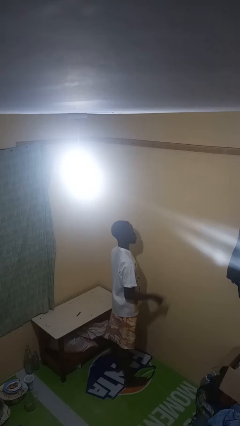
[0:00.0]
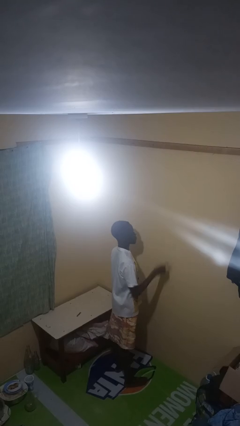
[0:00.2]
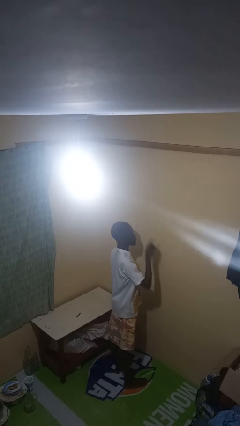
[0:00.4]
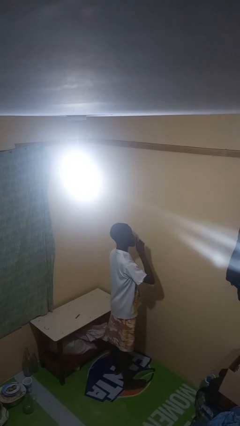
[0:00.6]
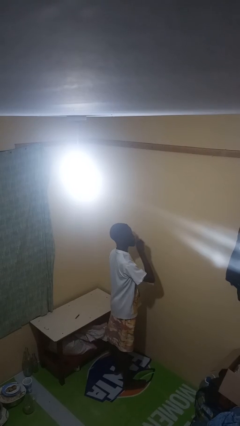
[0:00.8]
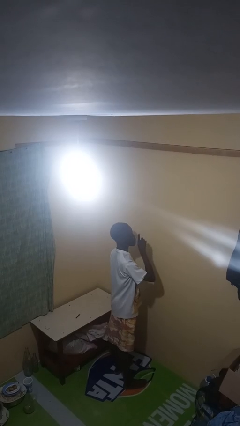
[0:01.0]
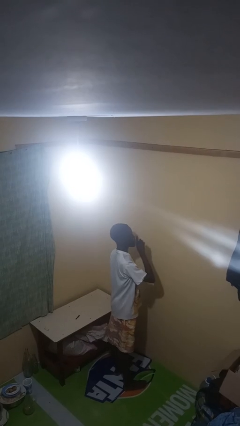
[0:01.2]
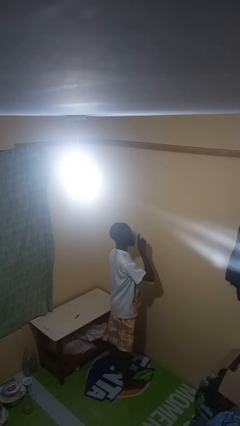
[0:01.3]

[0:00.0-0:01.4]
person gestures be quiet

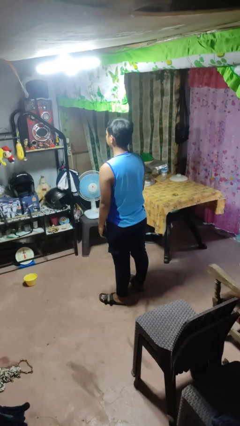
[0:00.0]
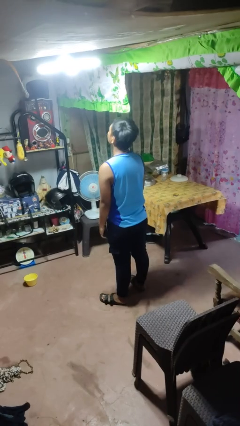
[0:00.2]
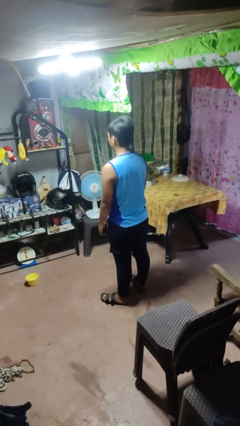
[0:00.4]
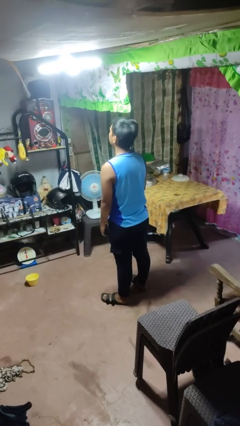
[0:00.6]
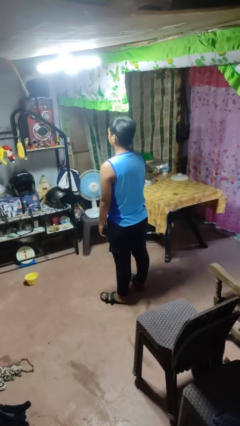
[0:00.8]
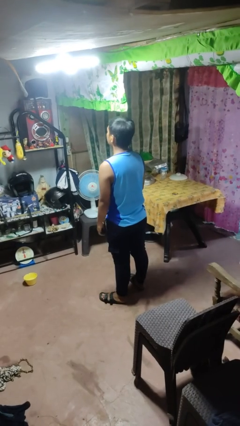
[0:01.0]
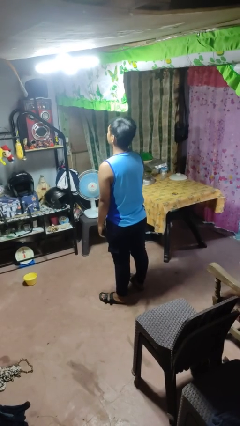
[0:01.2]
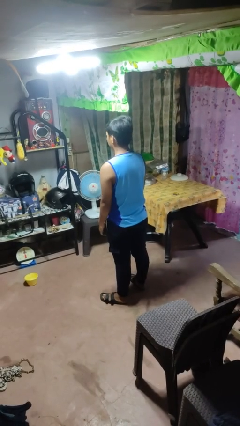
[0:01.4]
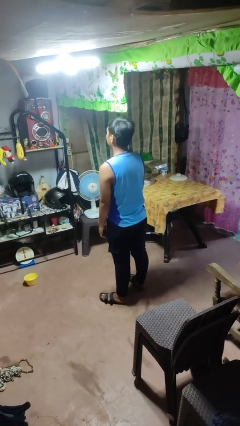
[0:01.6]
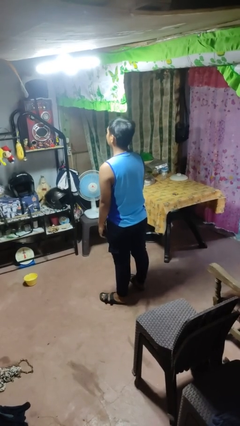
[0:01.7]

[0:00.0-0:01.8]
person nods head

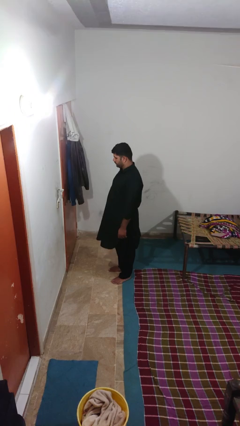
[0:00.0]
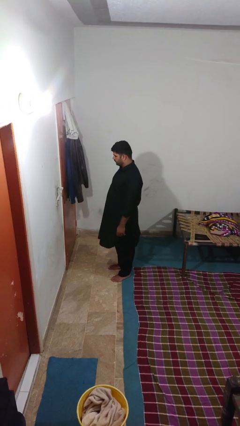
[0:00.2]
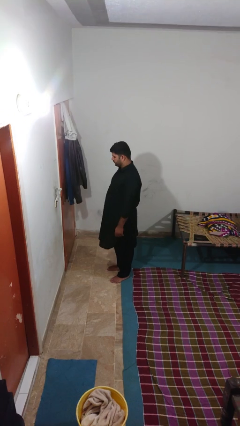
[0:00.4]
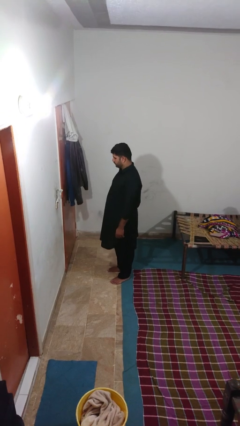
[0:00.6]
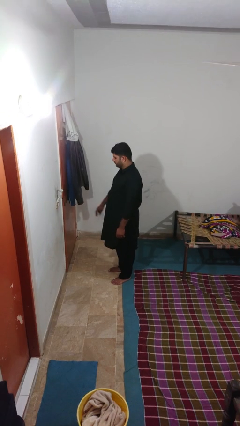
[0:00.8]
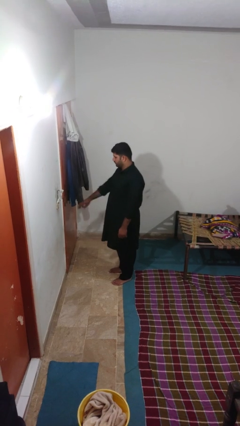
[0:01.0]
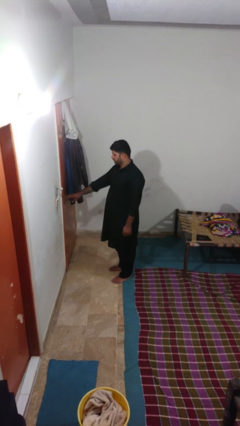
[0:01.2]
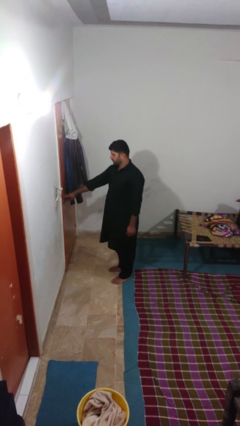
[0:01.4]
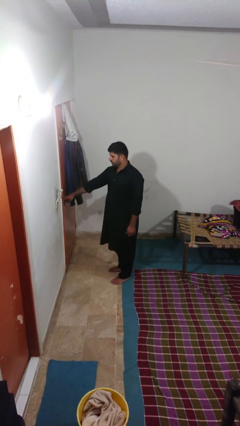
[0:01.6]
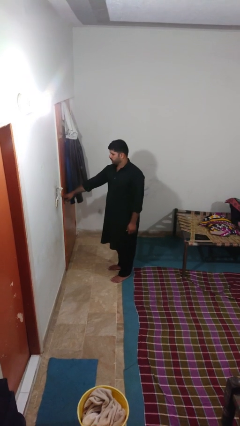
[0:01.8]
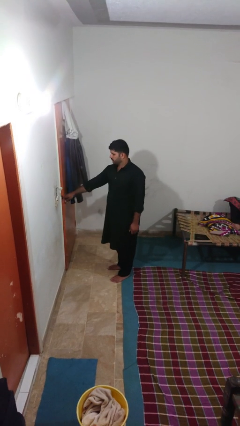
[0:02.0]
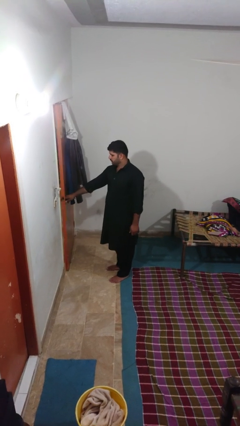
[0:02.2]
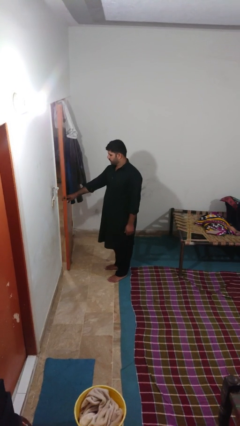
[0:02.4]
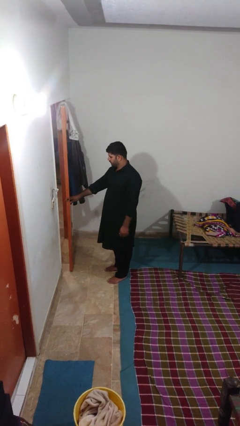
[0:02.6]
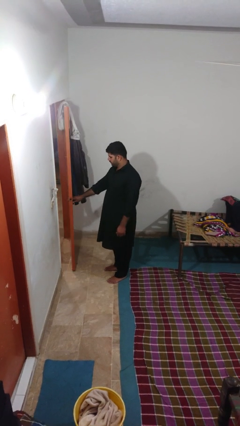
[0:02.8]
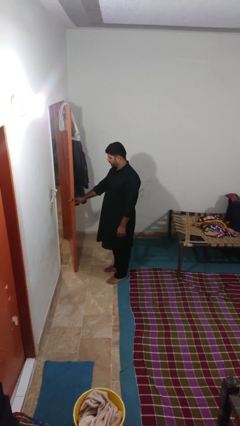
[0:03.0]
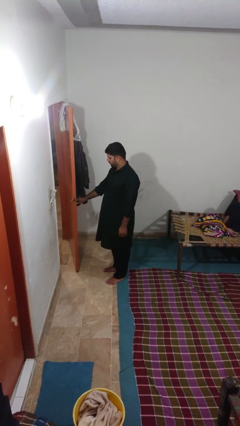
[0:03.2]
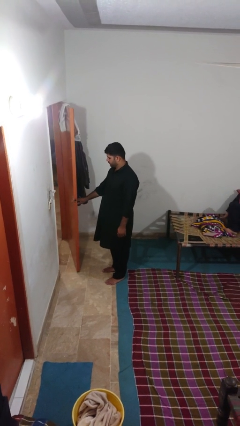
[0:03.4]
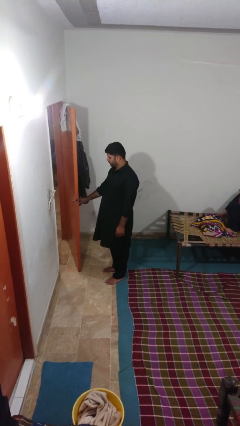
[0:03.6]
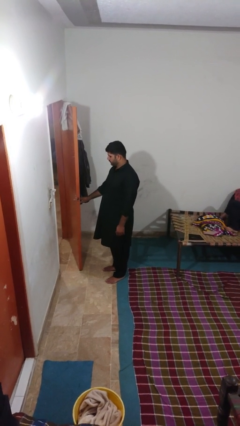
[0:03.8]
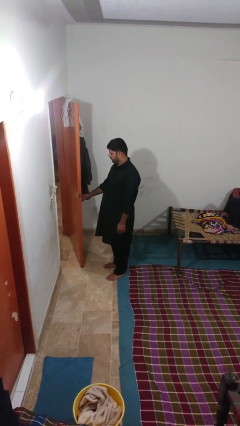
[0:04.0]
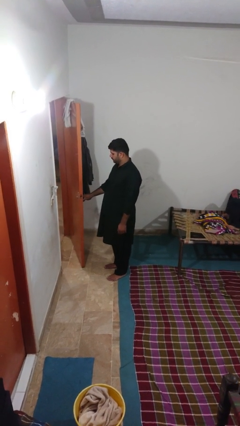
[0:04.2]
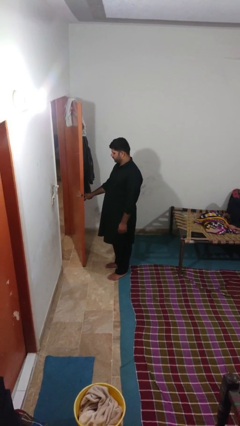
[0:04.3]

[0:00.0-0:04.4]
person opens facility door

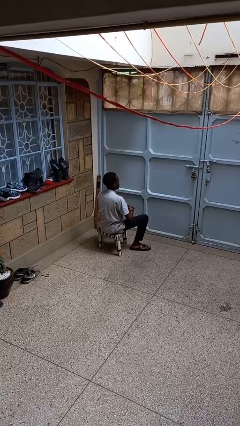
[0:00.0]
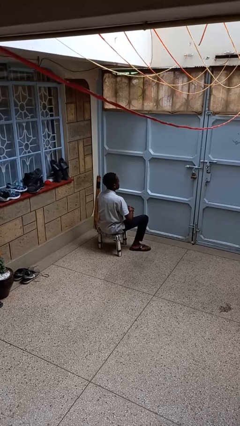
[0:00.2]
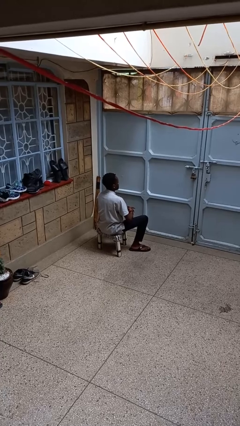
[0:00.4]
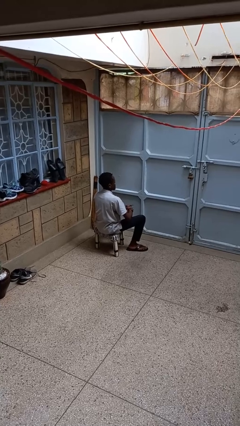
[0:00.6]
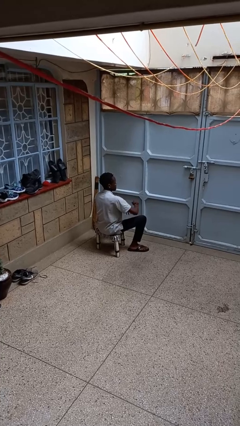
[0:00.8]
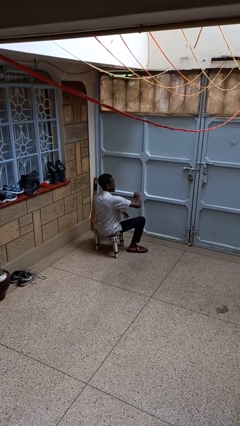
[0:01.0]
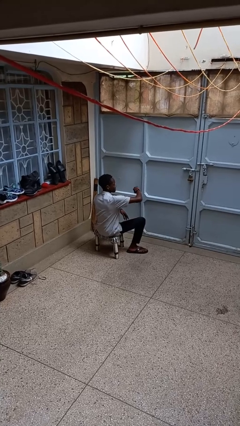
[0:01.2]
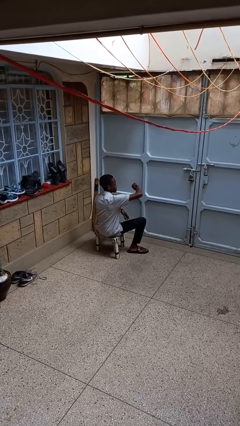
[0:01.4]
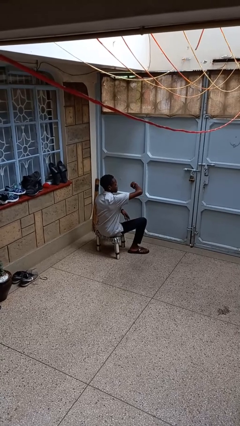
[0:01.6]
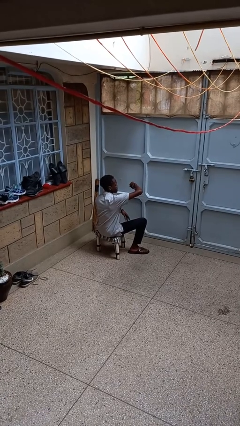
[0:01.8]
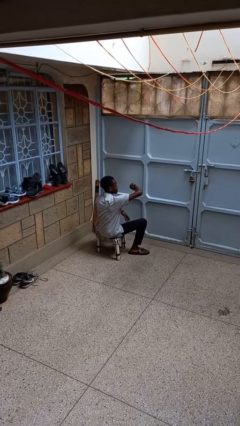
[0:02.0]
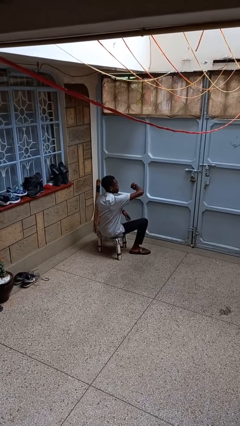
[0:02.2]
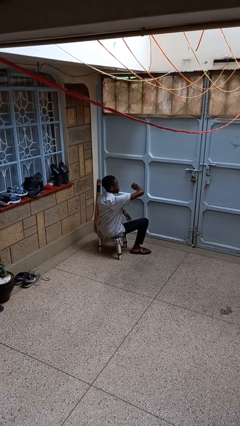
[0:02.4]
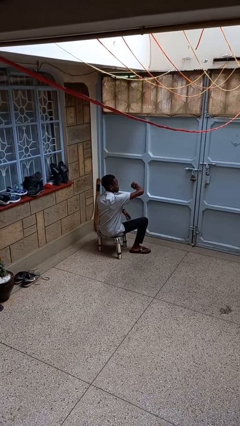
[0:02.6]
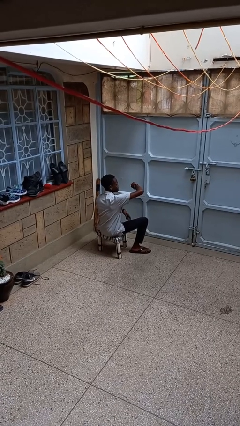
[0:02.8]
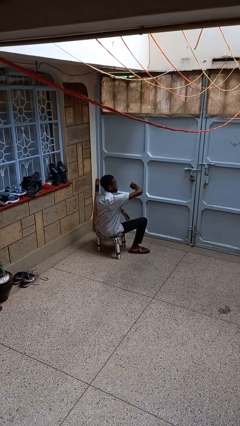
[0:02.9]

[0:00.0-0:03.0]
person looks at wristwatch

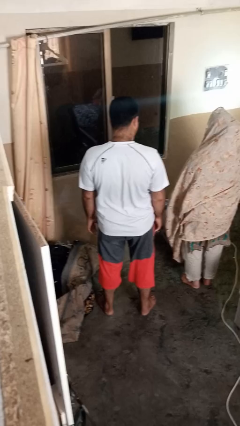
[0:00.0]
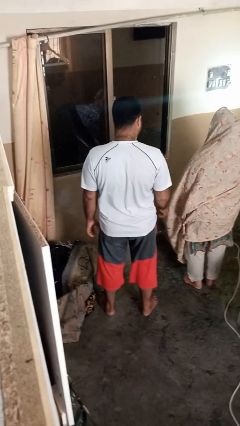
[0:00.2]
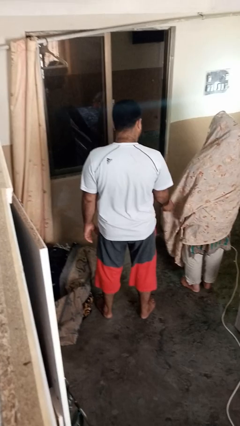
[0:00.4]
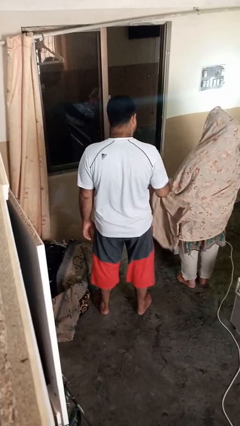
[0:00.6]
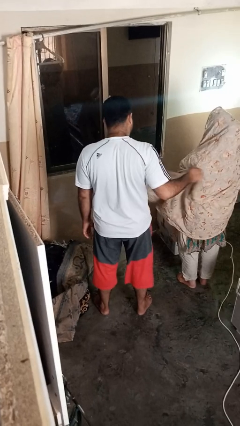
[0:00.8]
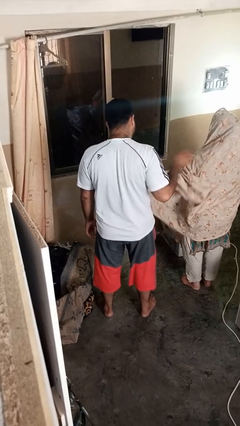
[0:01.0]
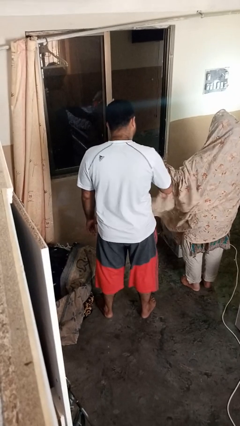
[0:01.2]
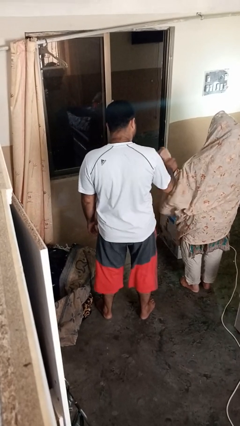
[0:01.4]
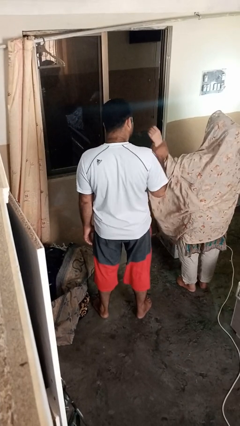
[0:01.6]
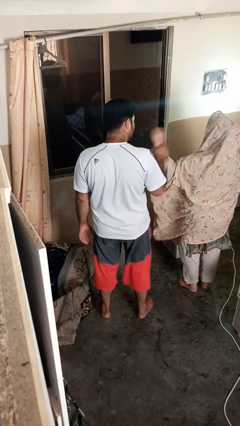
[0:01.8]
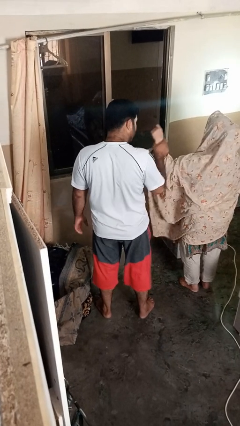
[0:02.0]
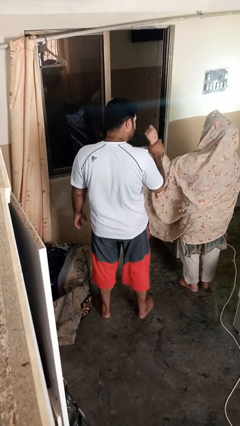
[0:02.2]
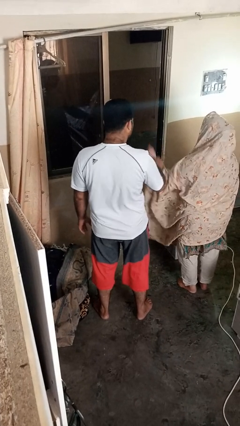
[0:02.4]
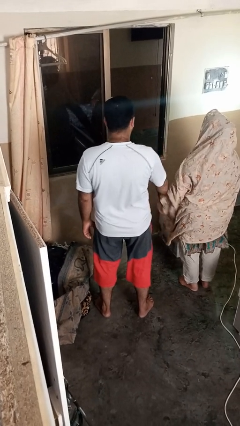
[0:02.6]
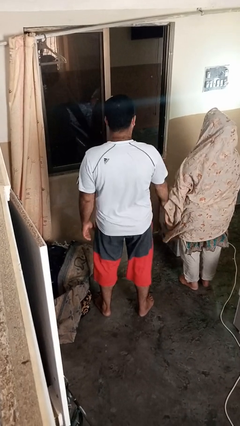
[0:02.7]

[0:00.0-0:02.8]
person grabs person by forearm

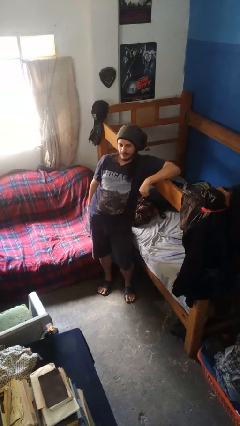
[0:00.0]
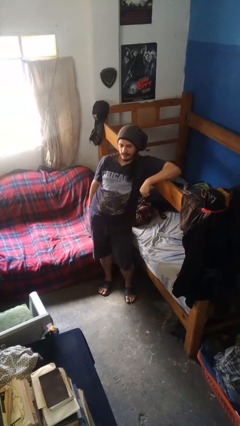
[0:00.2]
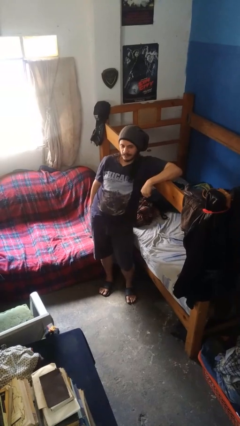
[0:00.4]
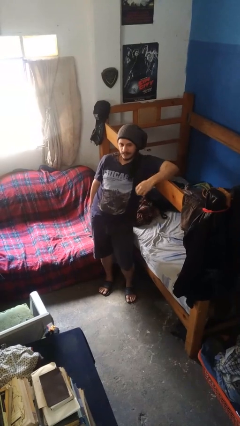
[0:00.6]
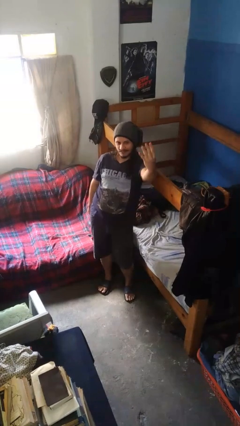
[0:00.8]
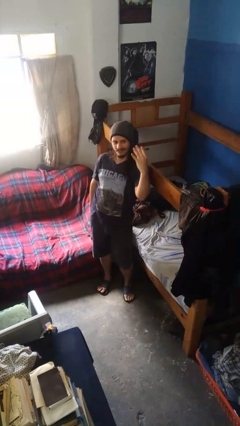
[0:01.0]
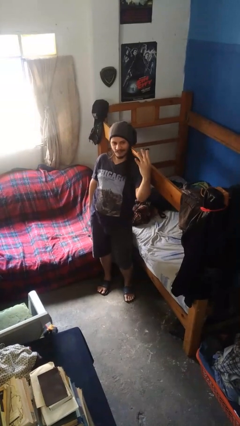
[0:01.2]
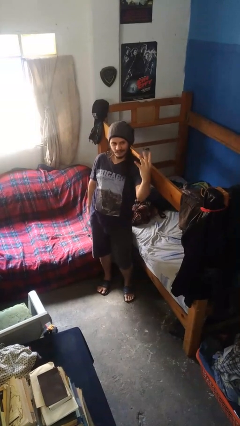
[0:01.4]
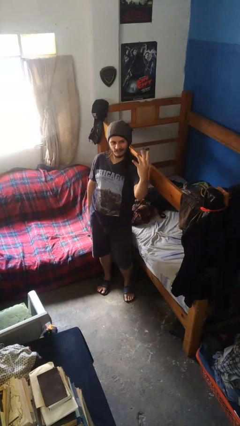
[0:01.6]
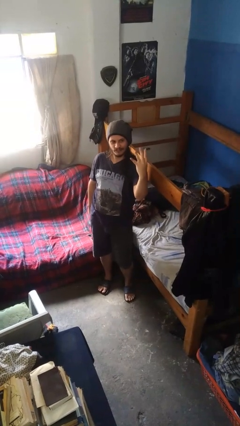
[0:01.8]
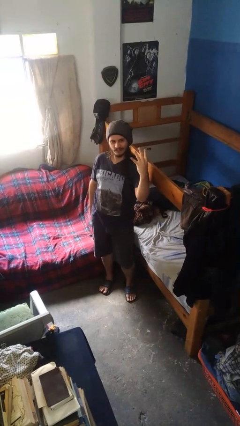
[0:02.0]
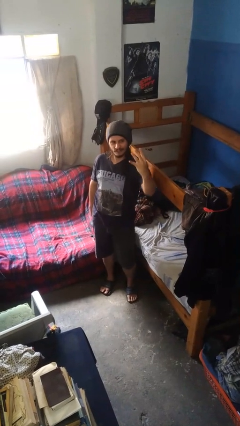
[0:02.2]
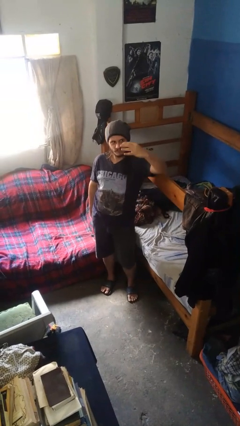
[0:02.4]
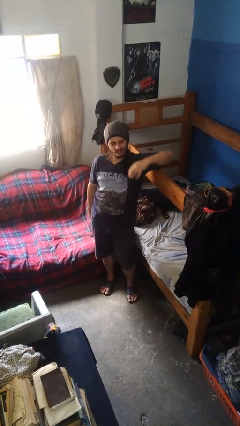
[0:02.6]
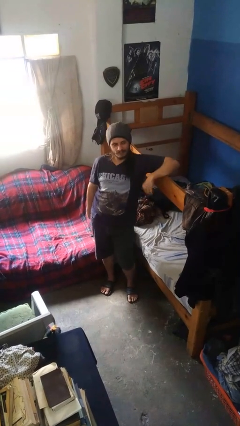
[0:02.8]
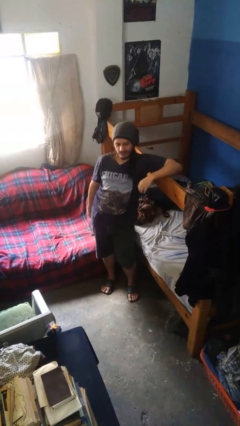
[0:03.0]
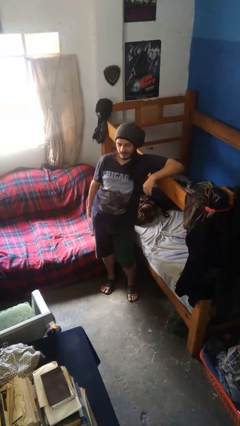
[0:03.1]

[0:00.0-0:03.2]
person gestures number four

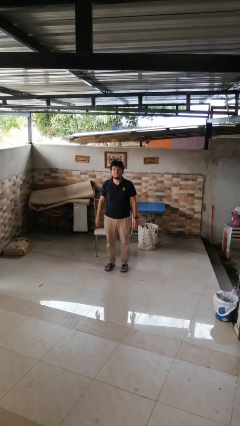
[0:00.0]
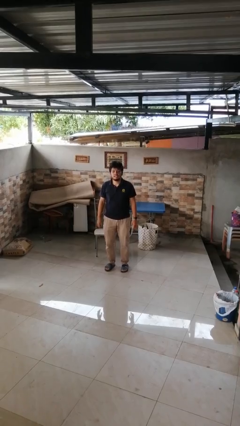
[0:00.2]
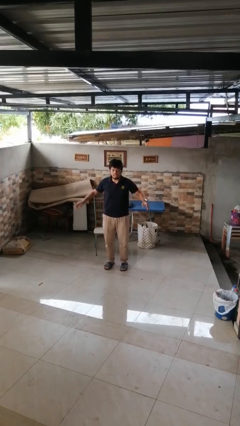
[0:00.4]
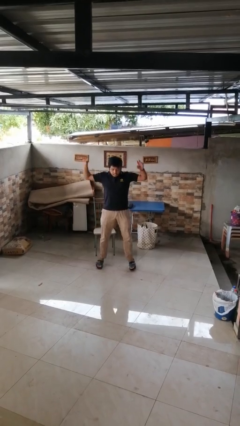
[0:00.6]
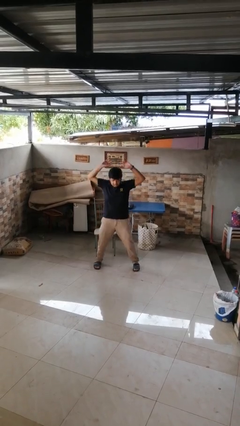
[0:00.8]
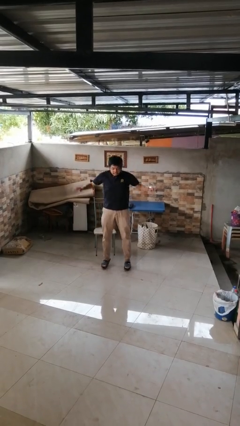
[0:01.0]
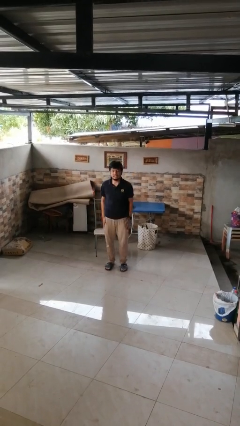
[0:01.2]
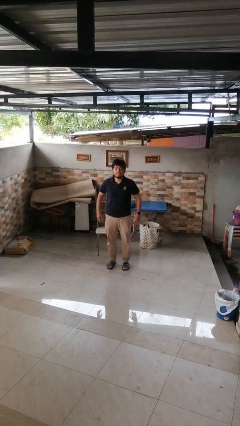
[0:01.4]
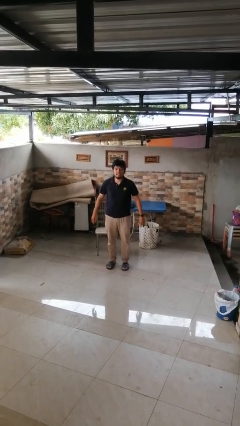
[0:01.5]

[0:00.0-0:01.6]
person exercises with jumping jacks
